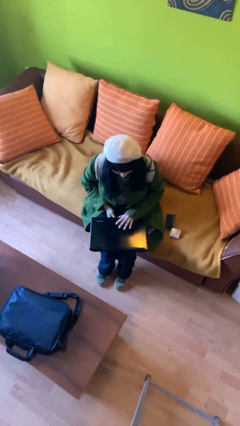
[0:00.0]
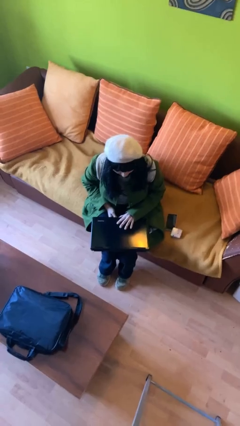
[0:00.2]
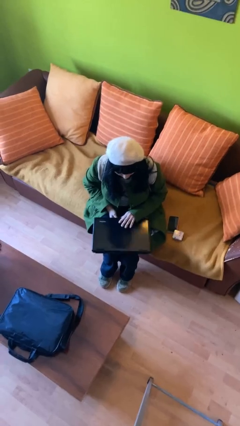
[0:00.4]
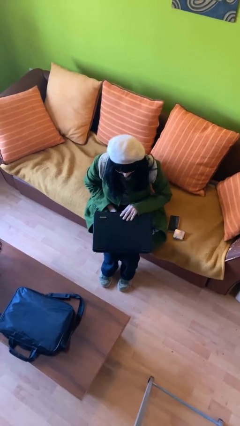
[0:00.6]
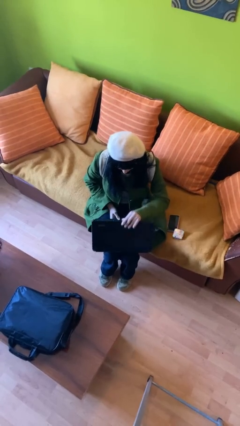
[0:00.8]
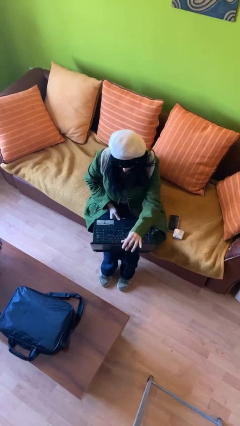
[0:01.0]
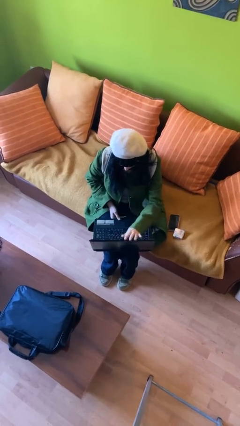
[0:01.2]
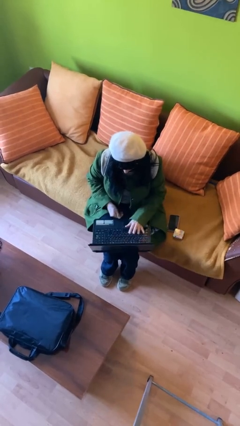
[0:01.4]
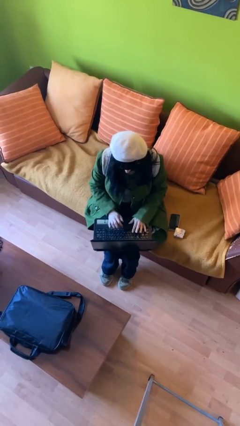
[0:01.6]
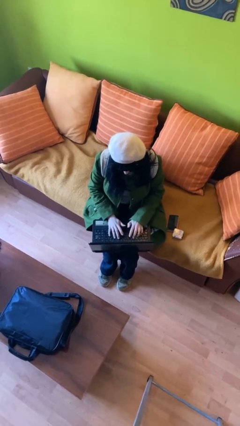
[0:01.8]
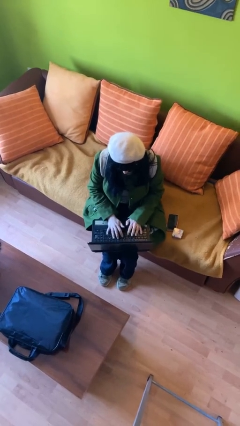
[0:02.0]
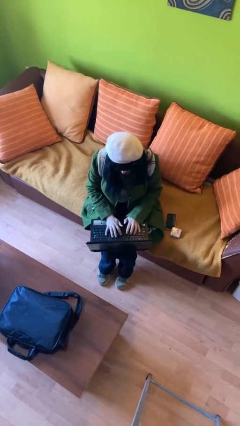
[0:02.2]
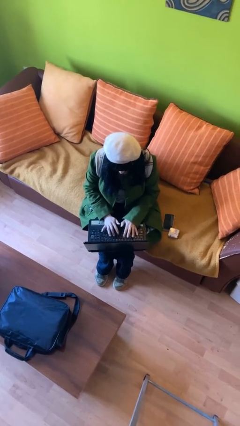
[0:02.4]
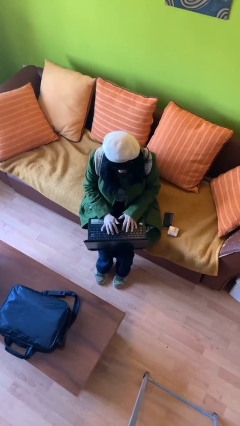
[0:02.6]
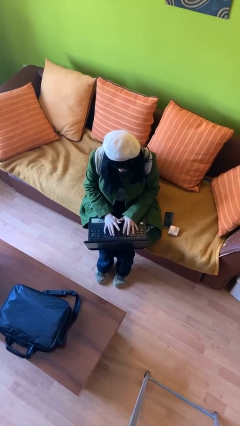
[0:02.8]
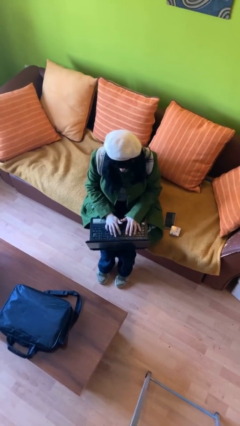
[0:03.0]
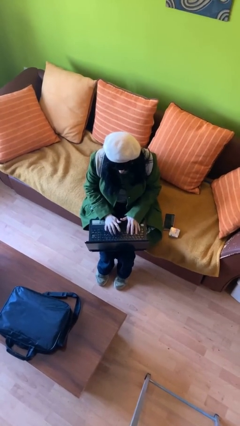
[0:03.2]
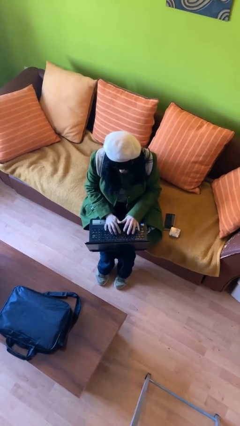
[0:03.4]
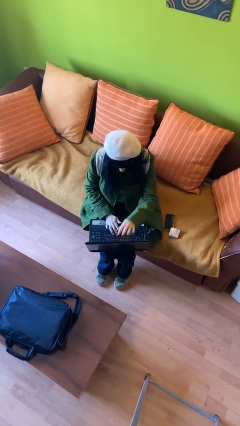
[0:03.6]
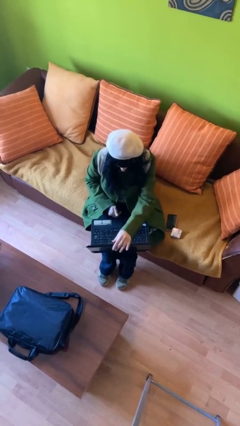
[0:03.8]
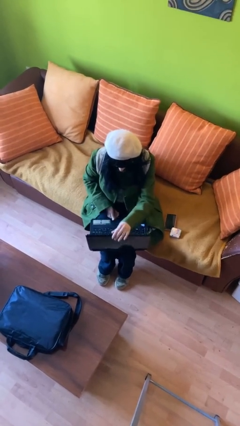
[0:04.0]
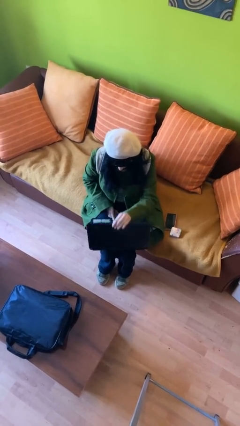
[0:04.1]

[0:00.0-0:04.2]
person interacts with laptop

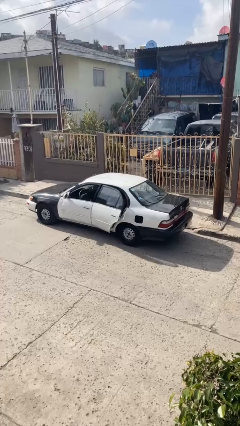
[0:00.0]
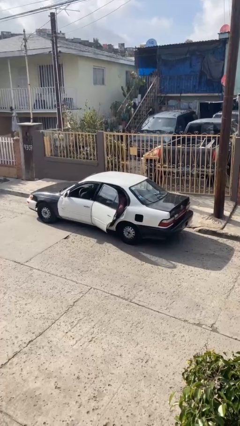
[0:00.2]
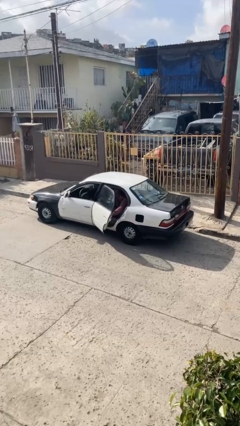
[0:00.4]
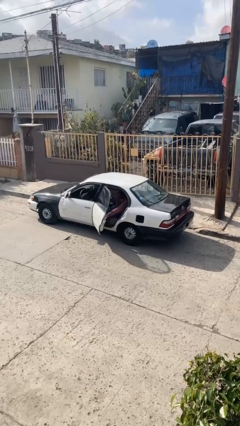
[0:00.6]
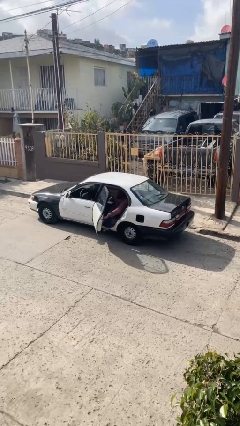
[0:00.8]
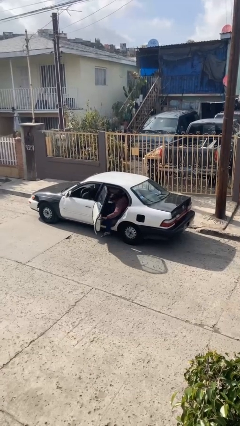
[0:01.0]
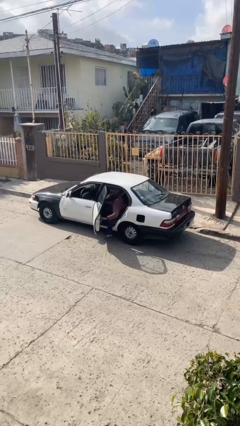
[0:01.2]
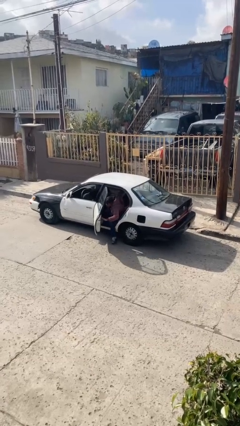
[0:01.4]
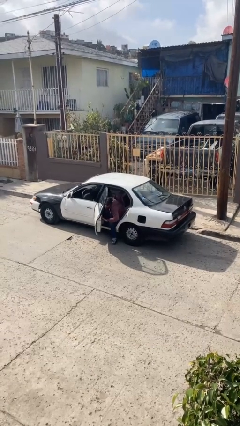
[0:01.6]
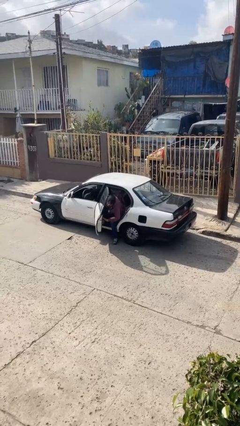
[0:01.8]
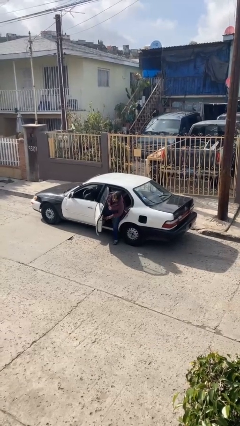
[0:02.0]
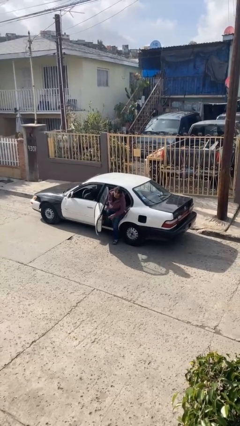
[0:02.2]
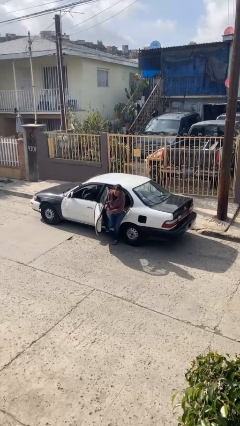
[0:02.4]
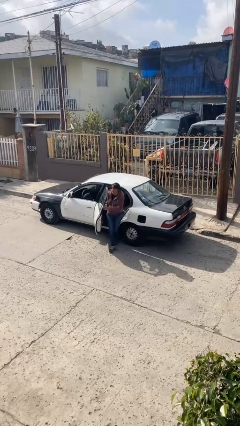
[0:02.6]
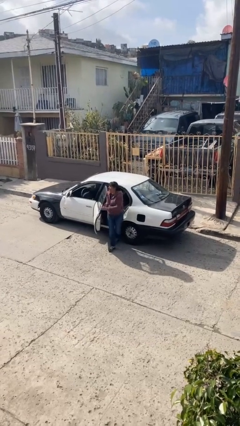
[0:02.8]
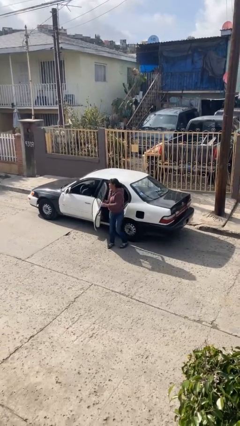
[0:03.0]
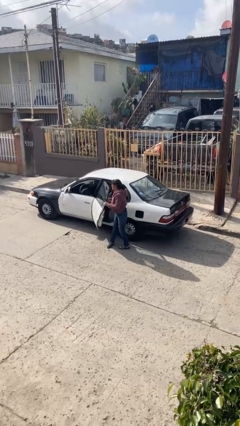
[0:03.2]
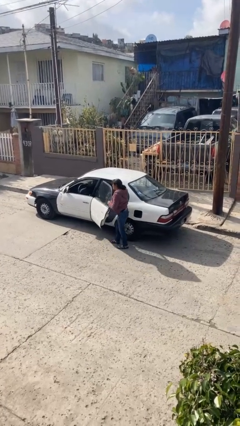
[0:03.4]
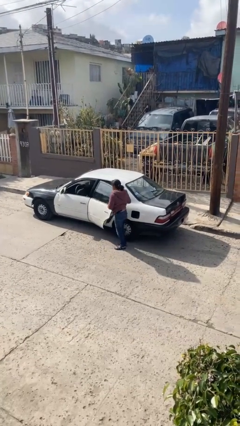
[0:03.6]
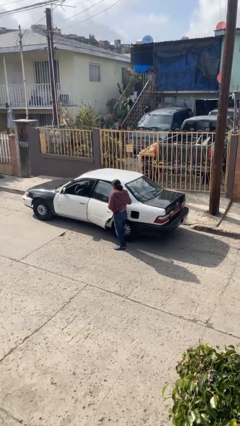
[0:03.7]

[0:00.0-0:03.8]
person exits car

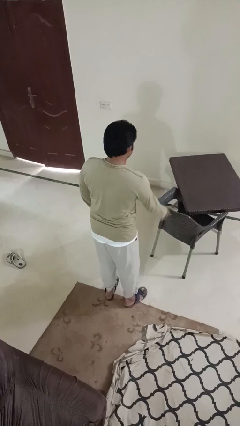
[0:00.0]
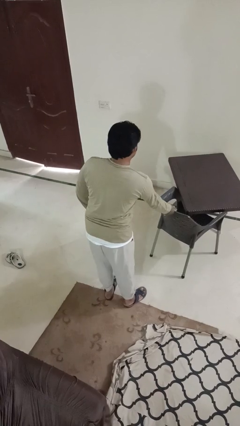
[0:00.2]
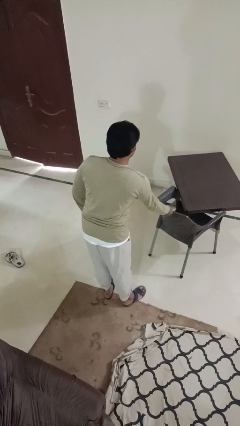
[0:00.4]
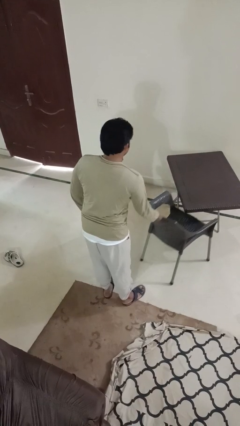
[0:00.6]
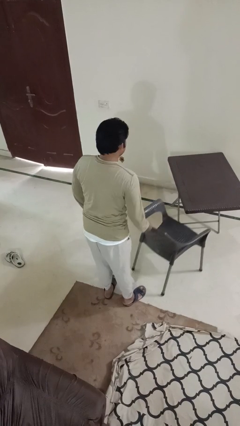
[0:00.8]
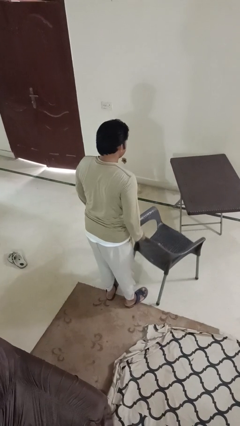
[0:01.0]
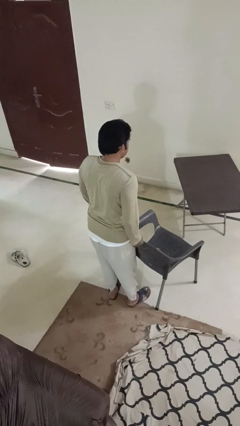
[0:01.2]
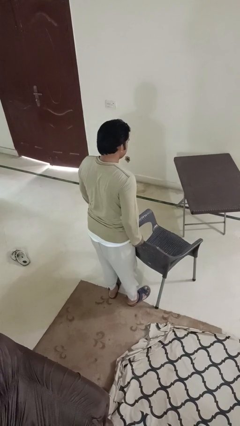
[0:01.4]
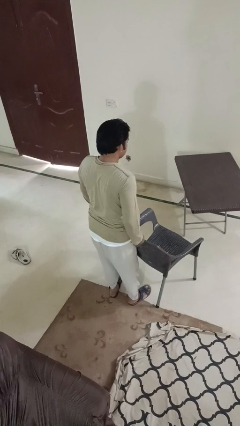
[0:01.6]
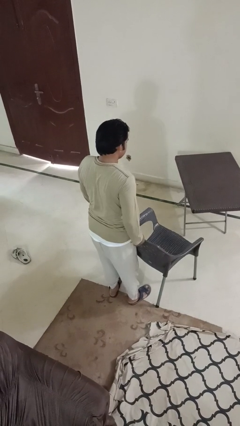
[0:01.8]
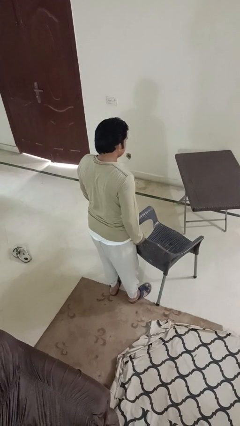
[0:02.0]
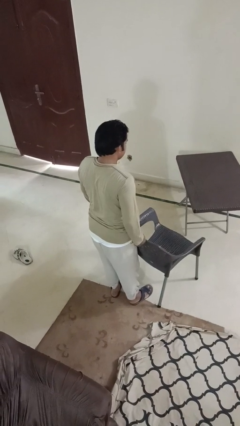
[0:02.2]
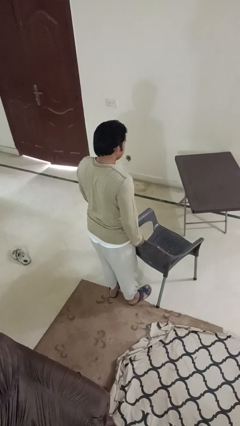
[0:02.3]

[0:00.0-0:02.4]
person pulls out chair

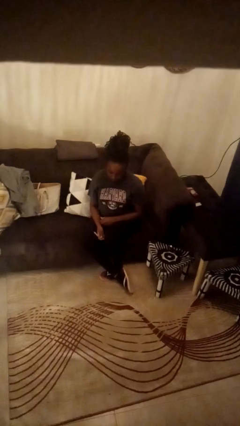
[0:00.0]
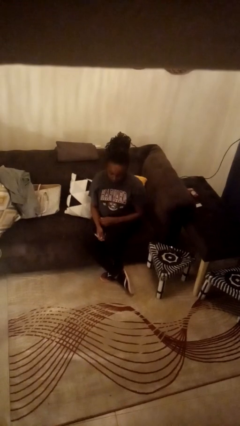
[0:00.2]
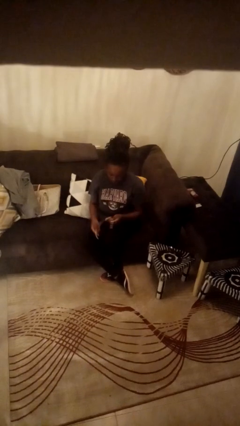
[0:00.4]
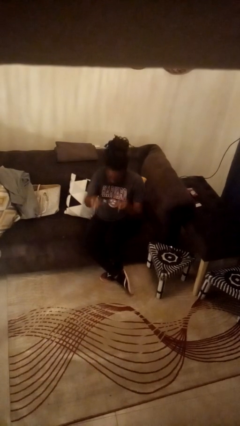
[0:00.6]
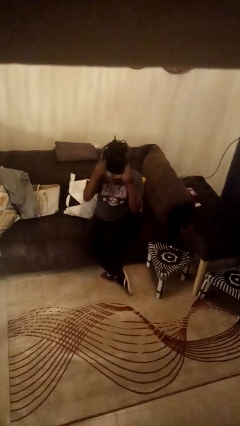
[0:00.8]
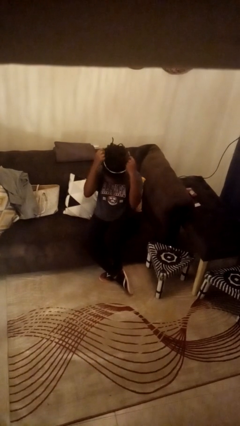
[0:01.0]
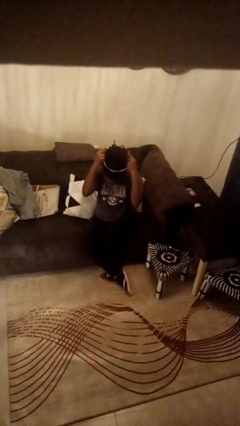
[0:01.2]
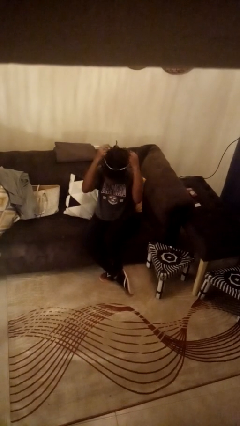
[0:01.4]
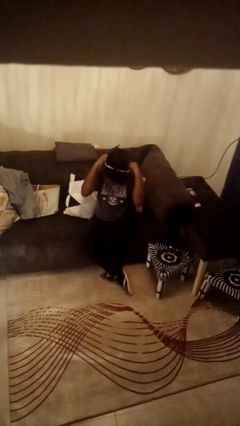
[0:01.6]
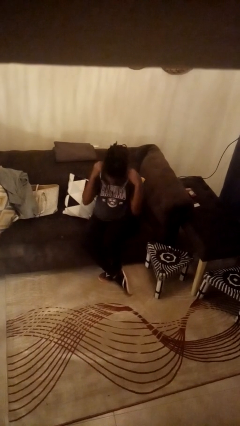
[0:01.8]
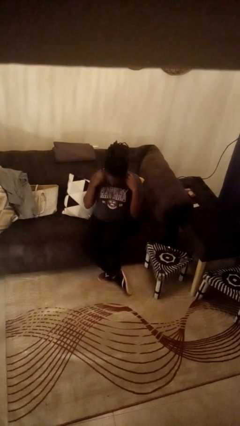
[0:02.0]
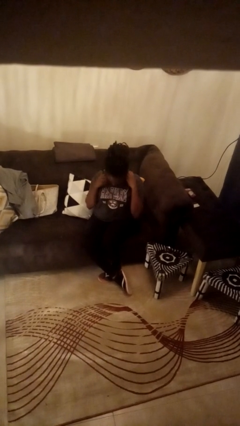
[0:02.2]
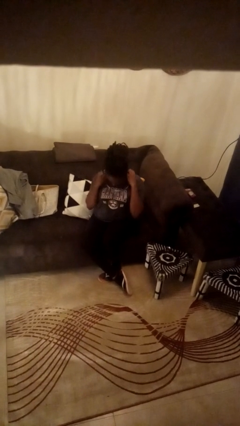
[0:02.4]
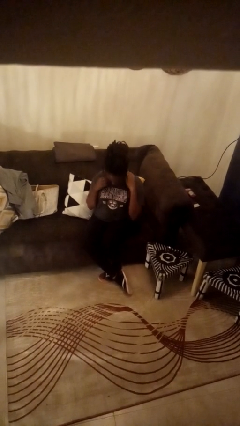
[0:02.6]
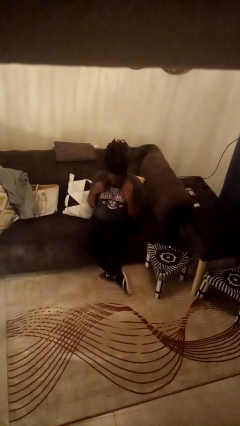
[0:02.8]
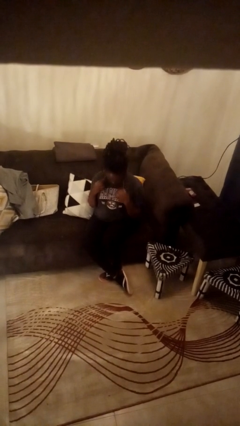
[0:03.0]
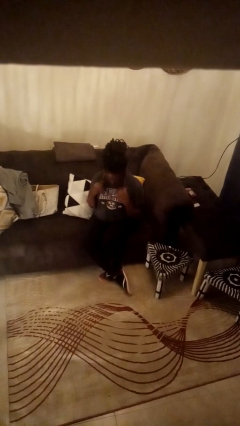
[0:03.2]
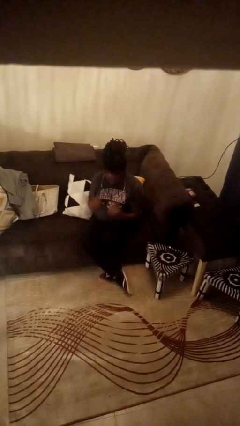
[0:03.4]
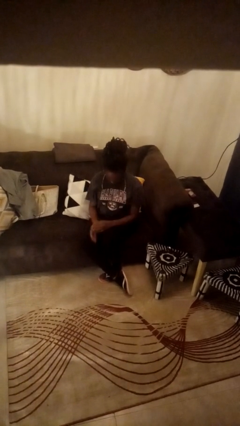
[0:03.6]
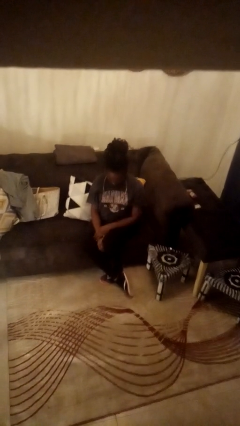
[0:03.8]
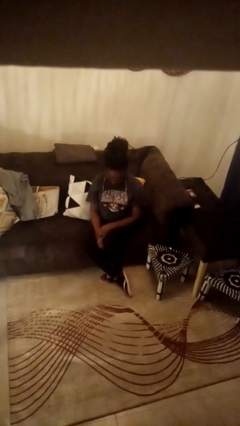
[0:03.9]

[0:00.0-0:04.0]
person puts on necklace

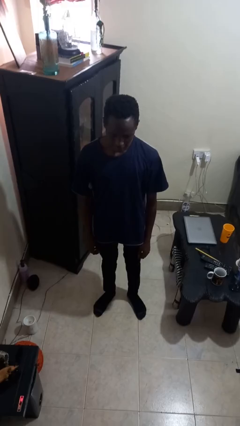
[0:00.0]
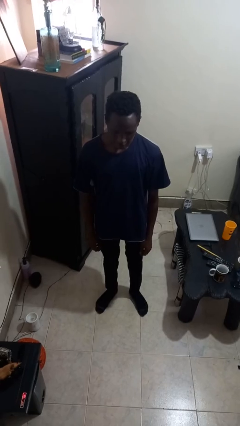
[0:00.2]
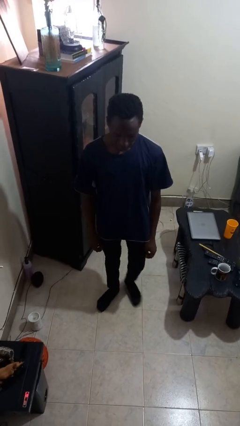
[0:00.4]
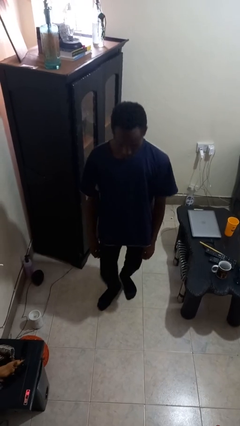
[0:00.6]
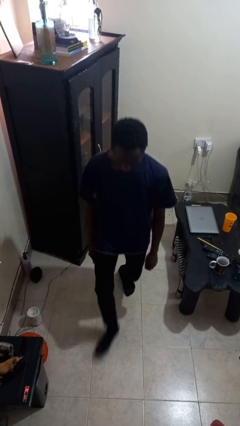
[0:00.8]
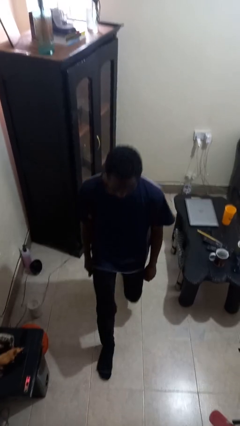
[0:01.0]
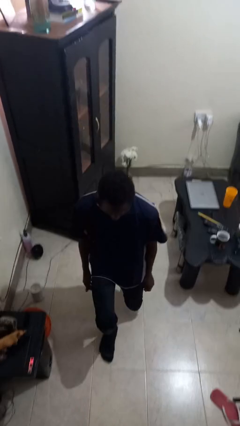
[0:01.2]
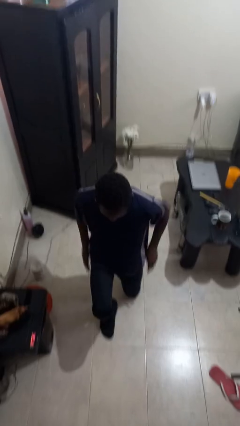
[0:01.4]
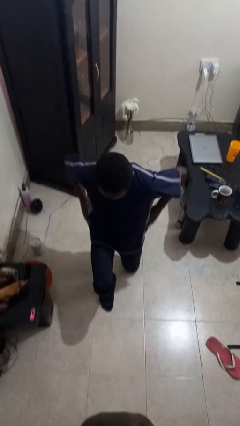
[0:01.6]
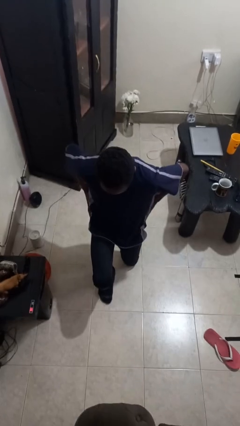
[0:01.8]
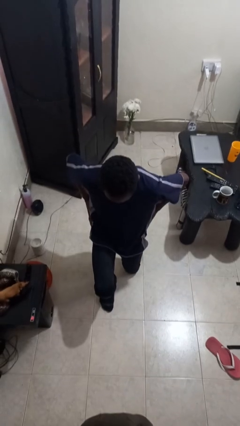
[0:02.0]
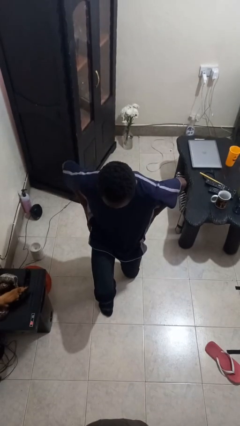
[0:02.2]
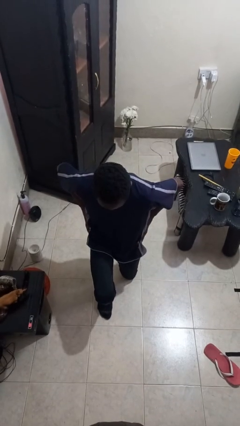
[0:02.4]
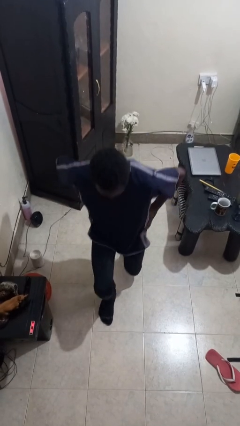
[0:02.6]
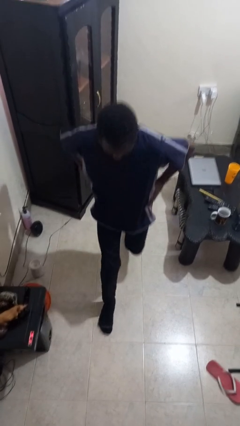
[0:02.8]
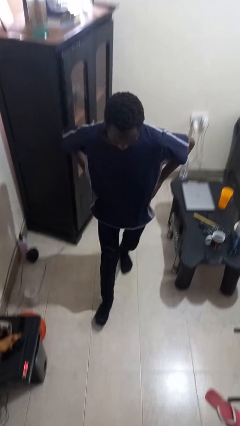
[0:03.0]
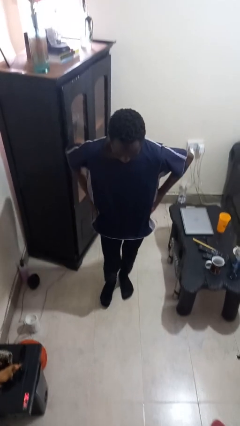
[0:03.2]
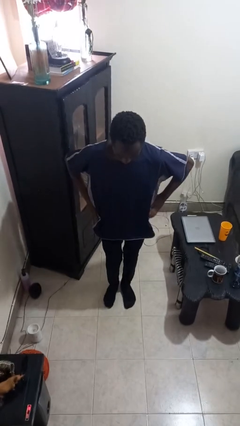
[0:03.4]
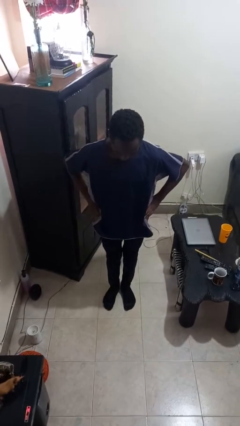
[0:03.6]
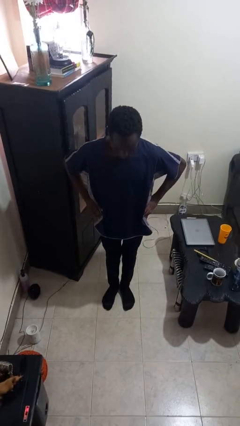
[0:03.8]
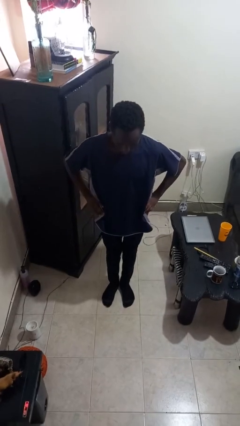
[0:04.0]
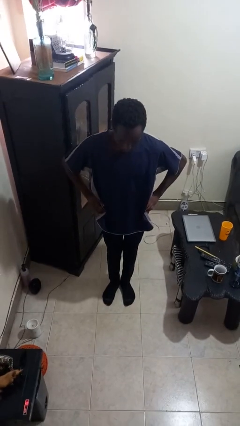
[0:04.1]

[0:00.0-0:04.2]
person exercises with lunges
